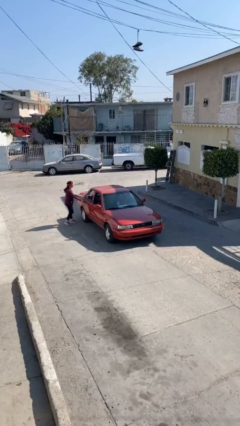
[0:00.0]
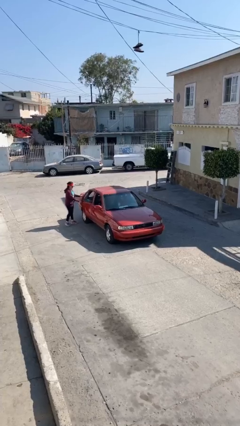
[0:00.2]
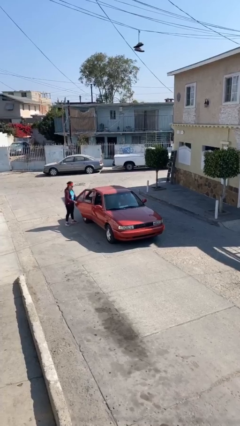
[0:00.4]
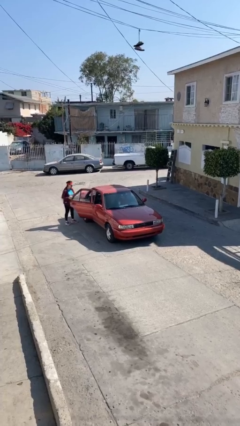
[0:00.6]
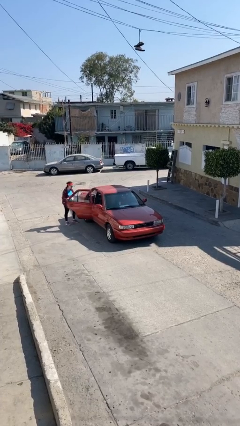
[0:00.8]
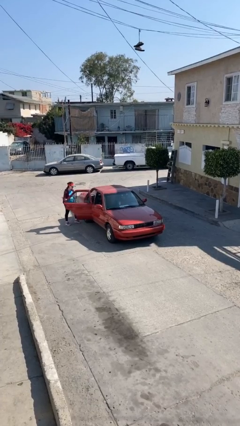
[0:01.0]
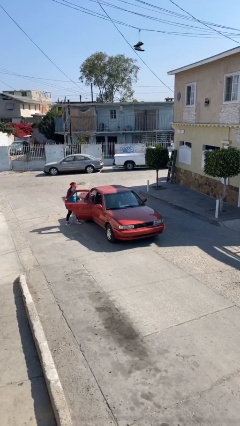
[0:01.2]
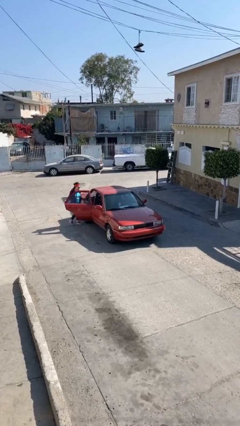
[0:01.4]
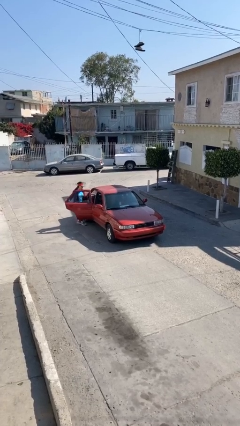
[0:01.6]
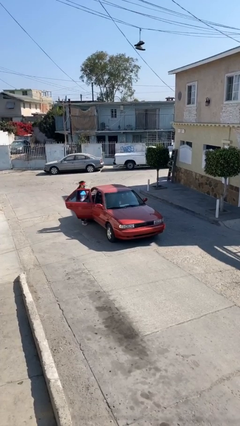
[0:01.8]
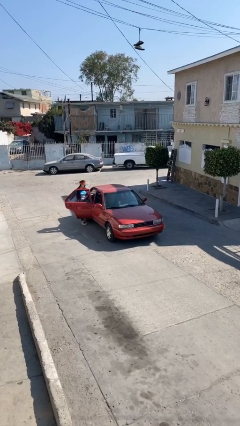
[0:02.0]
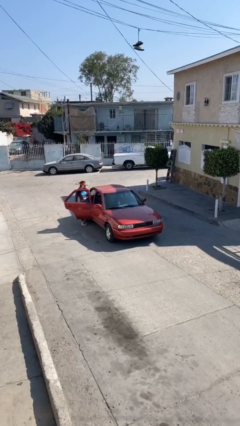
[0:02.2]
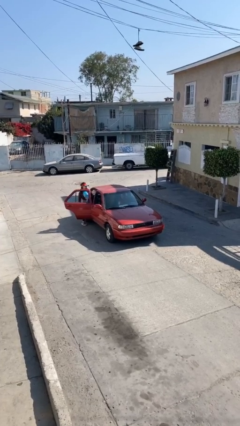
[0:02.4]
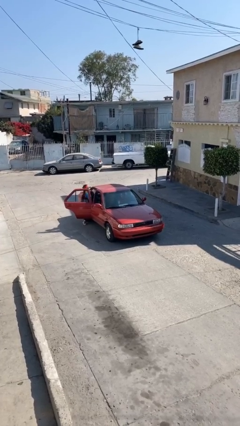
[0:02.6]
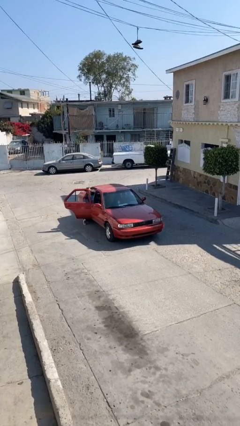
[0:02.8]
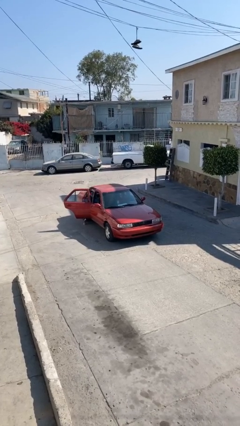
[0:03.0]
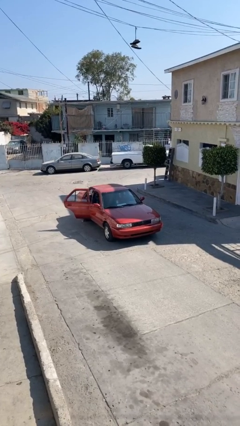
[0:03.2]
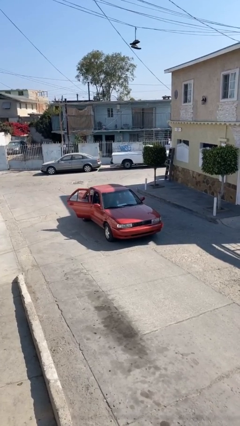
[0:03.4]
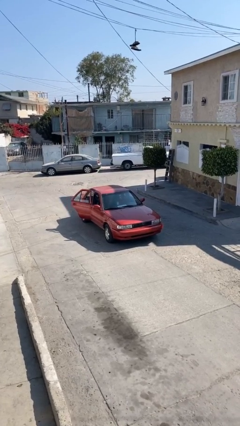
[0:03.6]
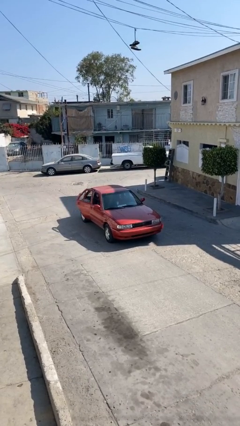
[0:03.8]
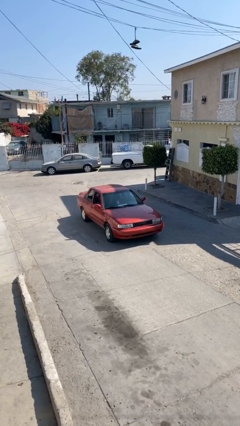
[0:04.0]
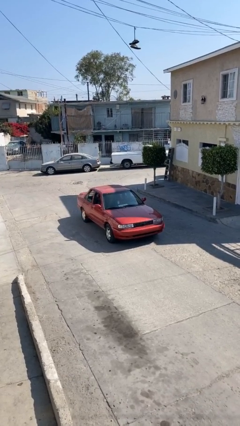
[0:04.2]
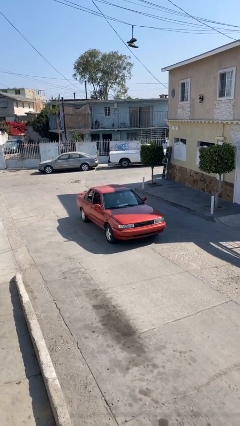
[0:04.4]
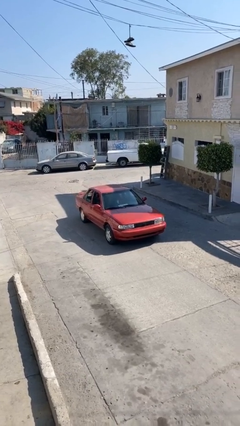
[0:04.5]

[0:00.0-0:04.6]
car picks up person

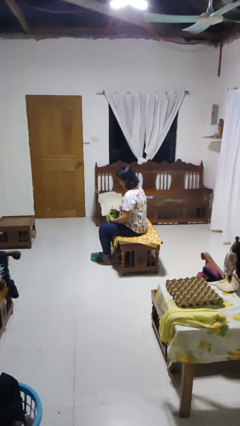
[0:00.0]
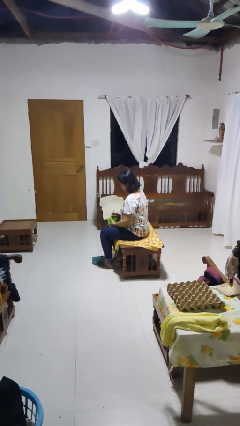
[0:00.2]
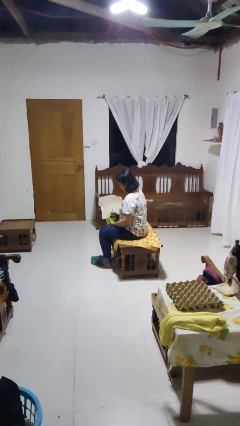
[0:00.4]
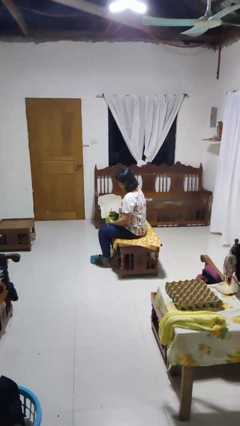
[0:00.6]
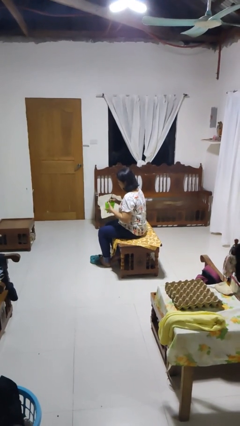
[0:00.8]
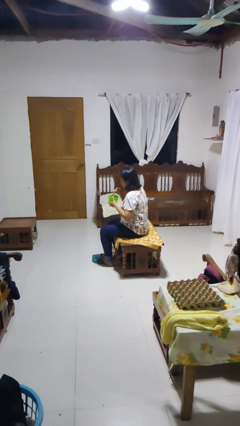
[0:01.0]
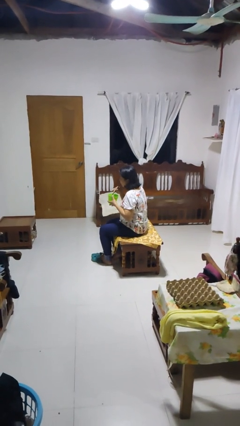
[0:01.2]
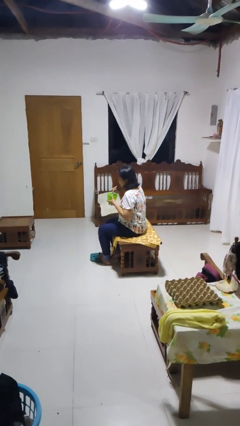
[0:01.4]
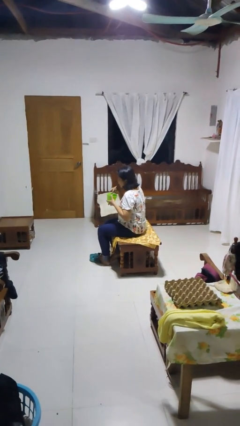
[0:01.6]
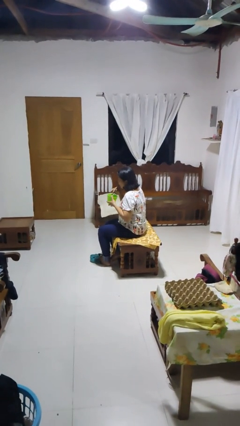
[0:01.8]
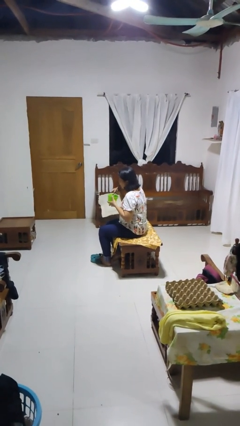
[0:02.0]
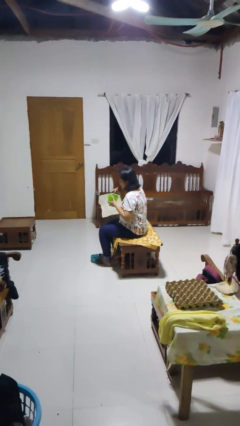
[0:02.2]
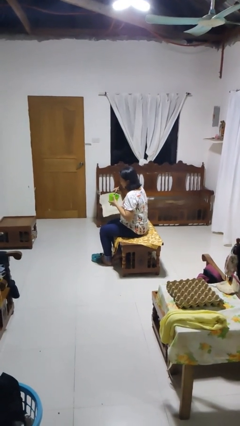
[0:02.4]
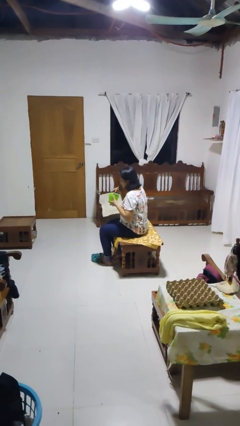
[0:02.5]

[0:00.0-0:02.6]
person drinks from straw

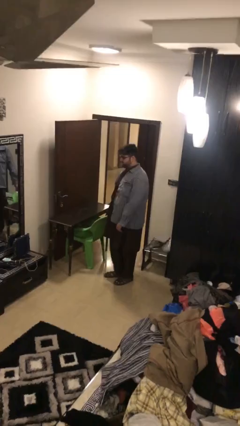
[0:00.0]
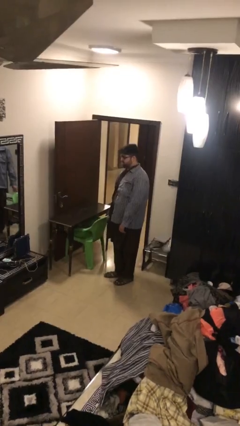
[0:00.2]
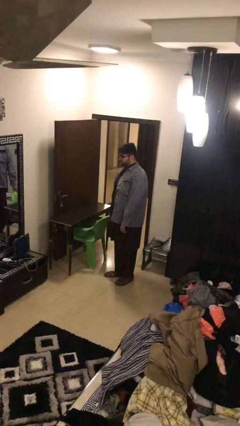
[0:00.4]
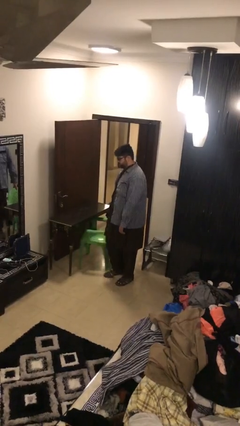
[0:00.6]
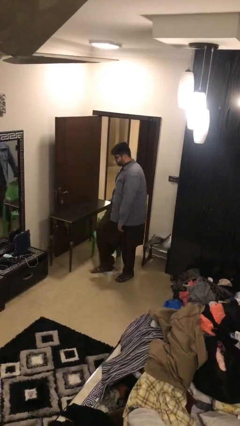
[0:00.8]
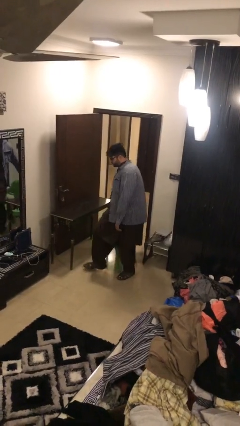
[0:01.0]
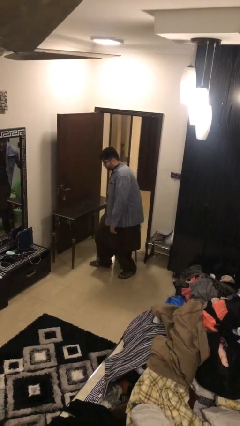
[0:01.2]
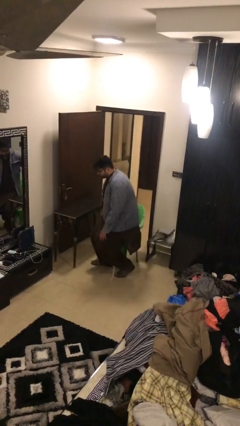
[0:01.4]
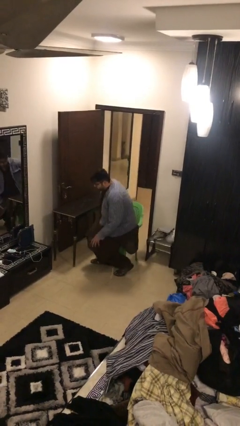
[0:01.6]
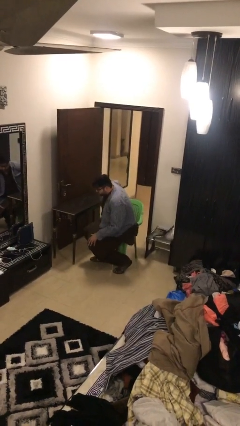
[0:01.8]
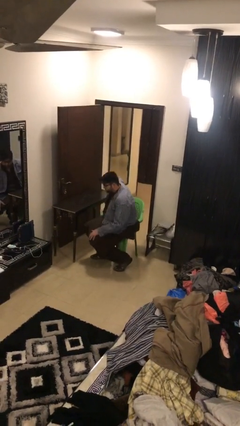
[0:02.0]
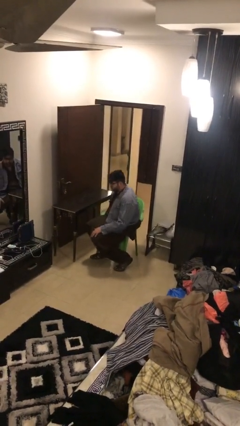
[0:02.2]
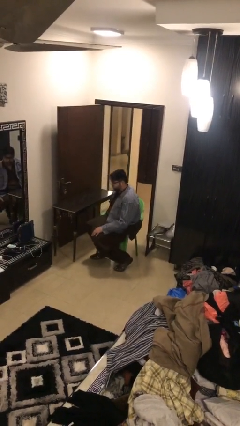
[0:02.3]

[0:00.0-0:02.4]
person sits down

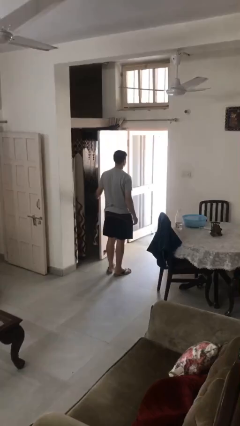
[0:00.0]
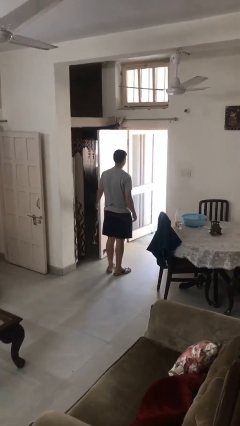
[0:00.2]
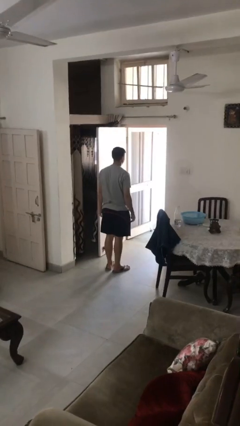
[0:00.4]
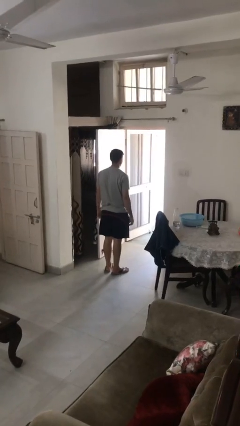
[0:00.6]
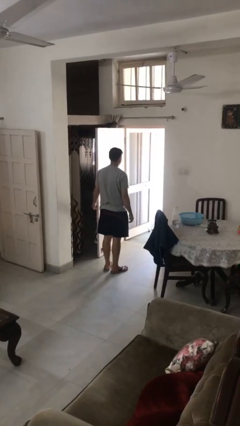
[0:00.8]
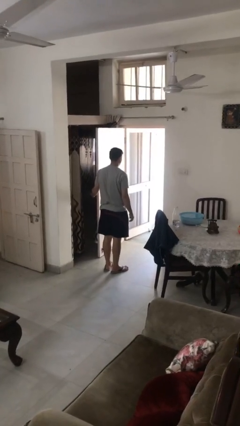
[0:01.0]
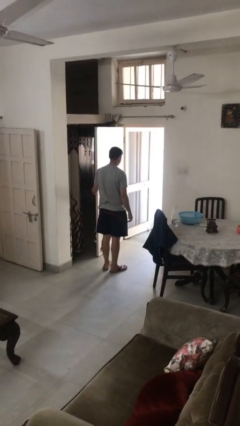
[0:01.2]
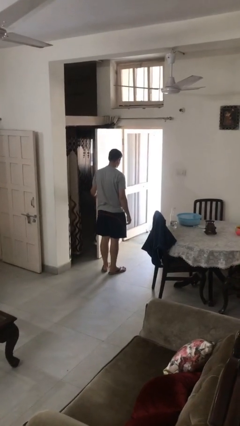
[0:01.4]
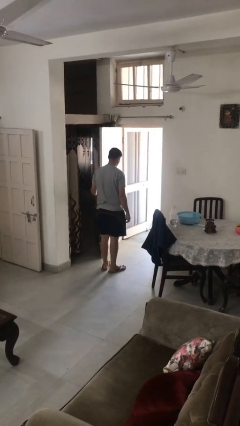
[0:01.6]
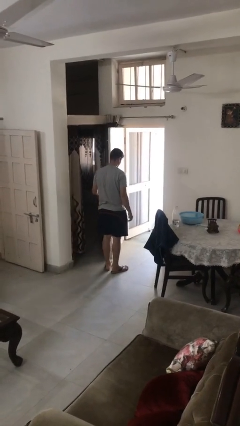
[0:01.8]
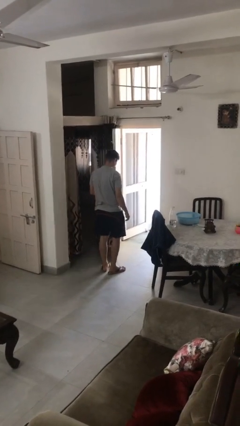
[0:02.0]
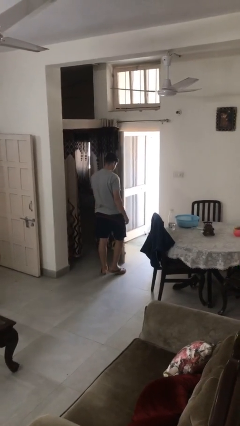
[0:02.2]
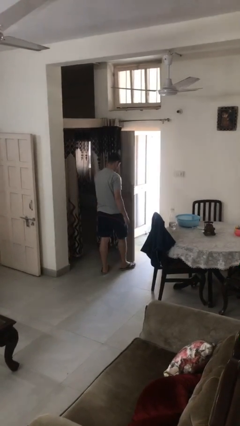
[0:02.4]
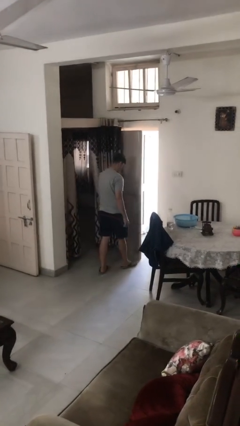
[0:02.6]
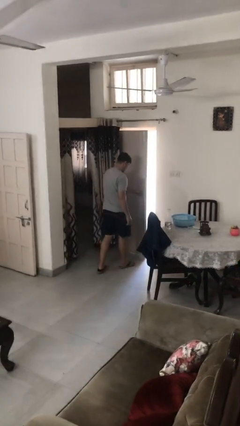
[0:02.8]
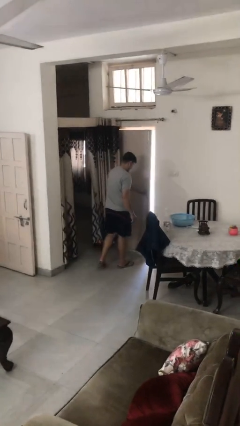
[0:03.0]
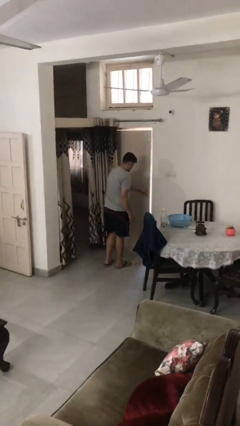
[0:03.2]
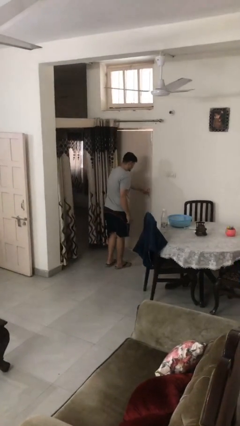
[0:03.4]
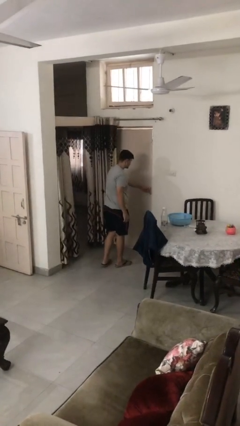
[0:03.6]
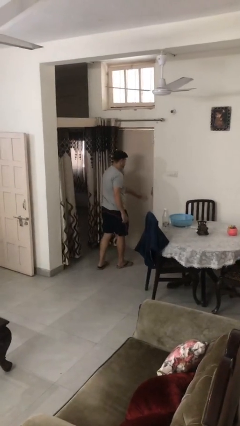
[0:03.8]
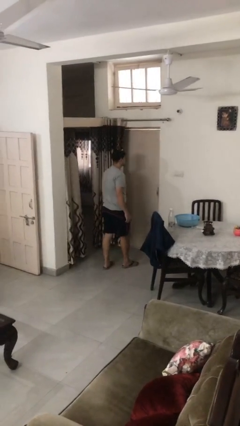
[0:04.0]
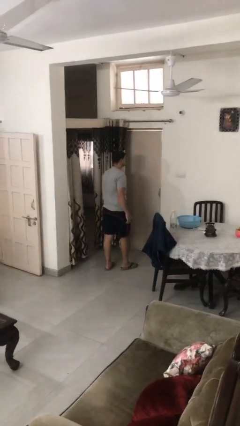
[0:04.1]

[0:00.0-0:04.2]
person closes facility door

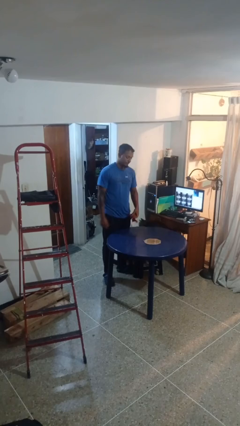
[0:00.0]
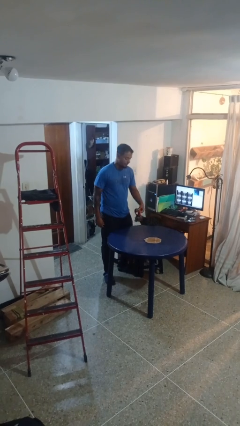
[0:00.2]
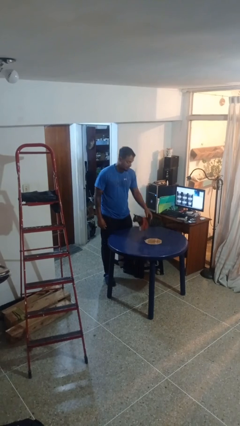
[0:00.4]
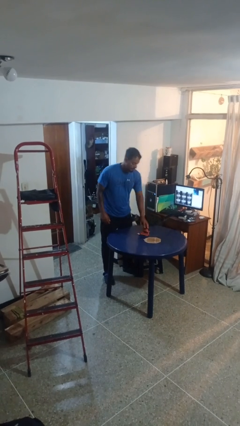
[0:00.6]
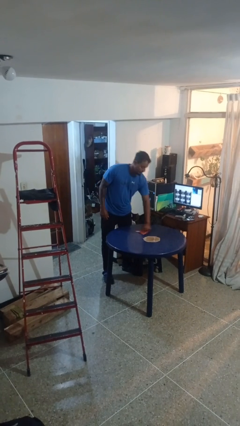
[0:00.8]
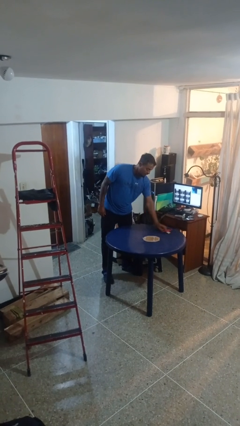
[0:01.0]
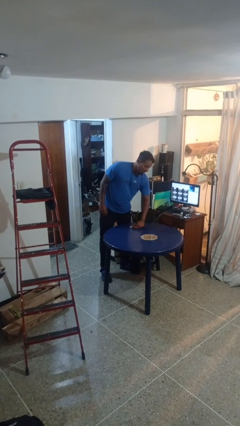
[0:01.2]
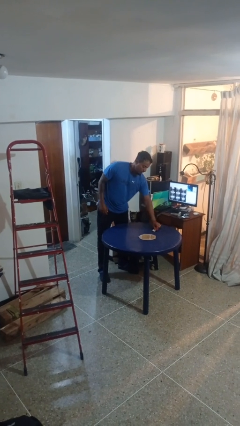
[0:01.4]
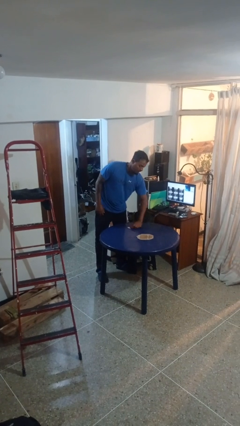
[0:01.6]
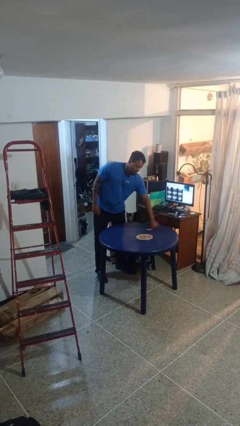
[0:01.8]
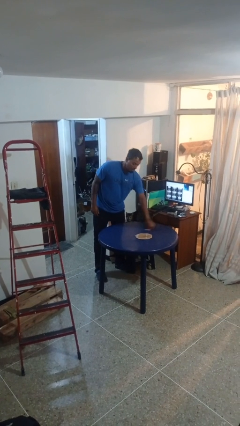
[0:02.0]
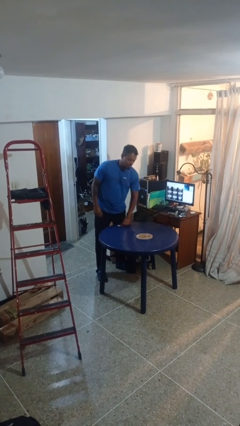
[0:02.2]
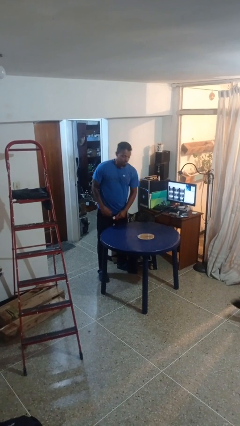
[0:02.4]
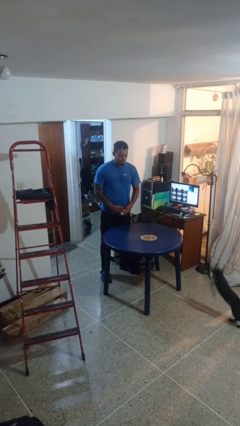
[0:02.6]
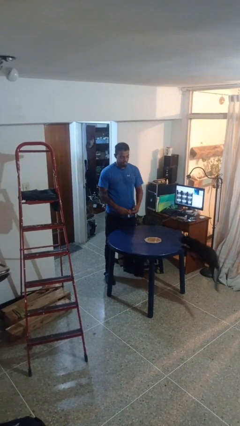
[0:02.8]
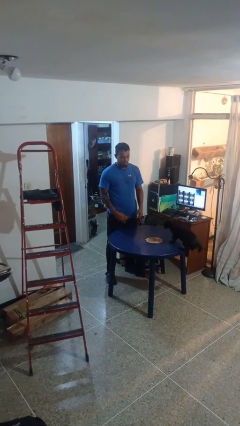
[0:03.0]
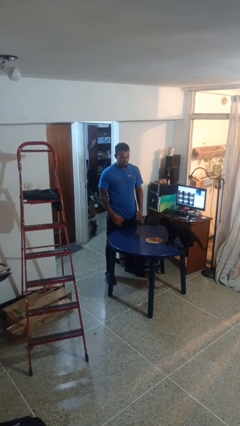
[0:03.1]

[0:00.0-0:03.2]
person cleans table with rag

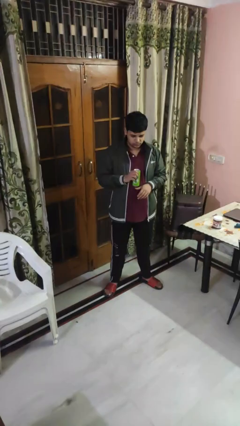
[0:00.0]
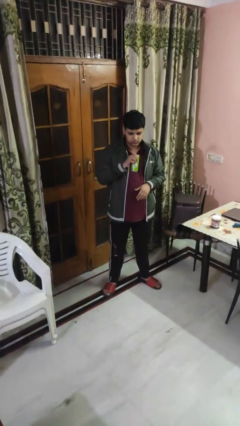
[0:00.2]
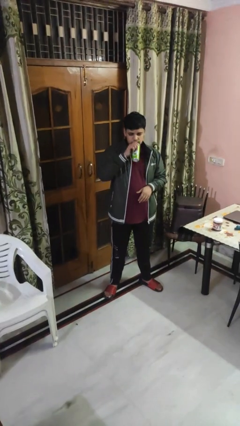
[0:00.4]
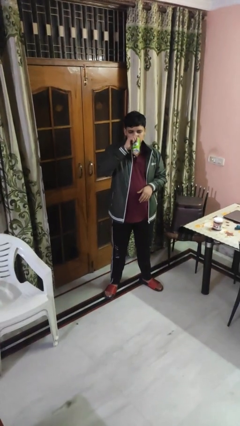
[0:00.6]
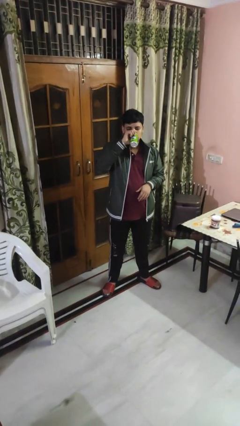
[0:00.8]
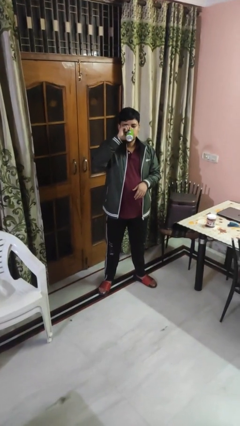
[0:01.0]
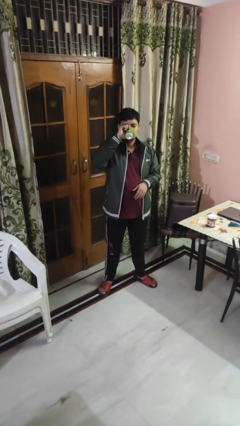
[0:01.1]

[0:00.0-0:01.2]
person opens beverage can
